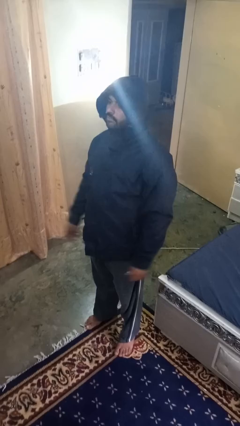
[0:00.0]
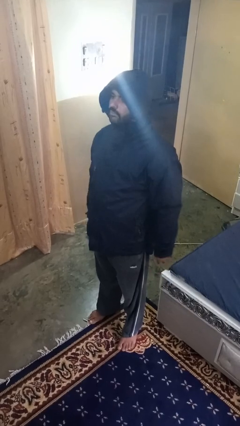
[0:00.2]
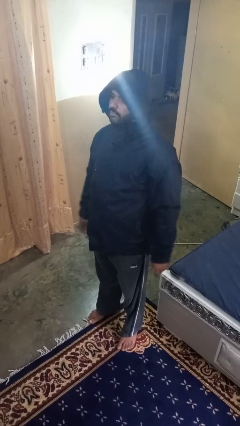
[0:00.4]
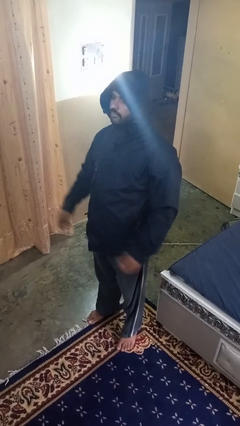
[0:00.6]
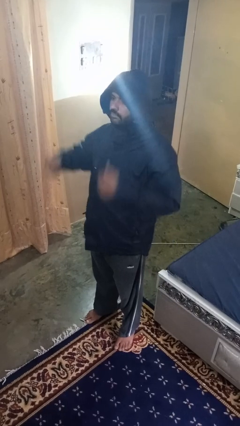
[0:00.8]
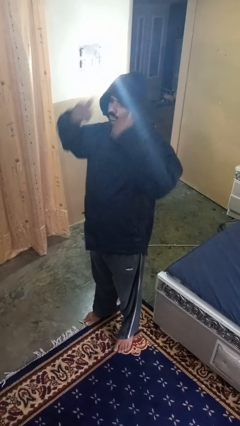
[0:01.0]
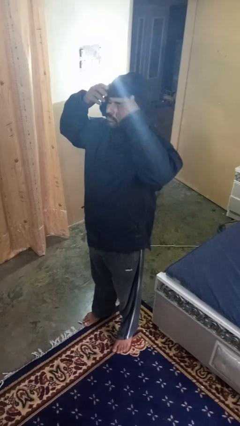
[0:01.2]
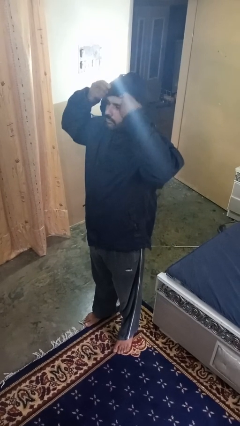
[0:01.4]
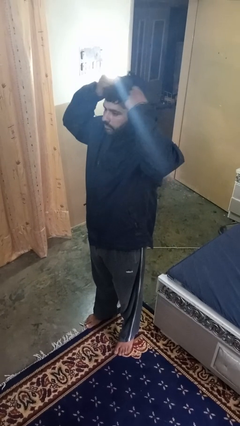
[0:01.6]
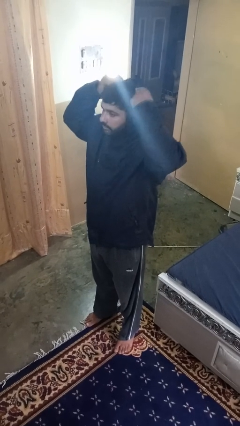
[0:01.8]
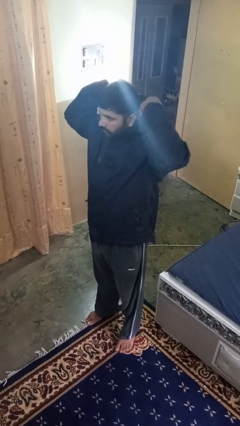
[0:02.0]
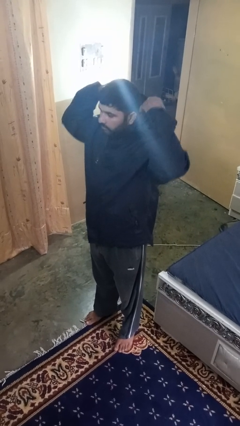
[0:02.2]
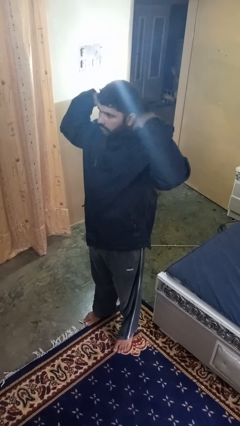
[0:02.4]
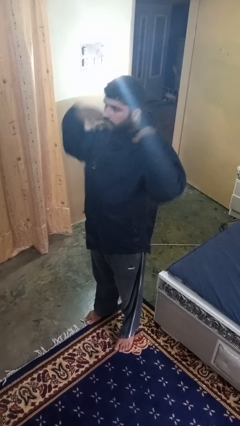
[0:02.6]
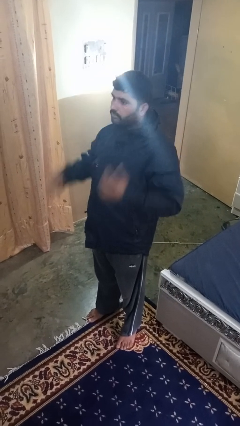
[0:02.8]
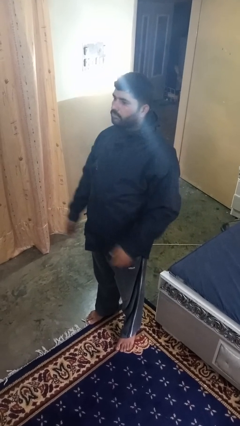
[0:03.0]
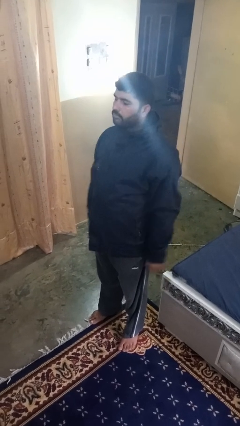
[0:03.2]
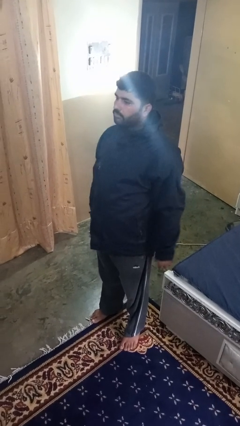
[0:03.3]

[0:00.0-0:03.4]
person takes off hoodie

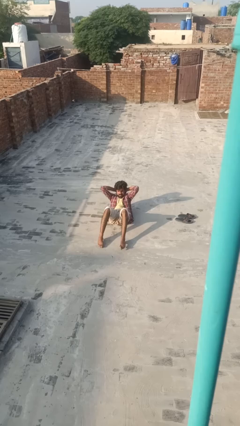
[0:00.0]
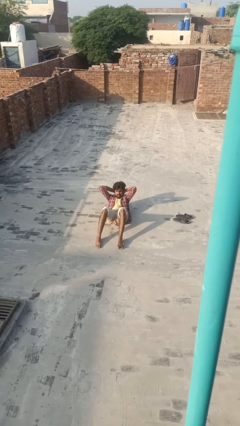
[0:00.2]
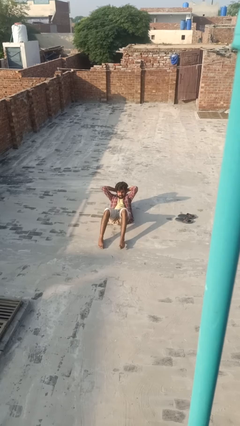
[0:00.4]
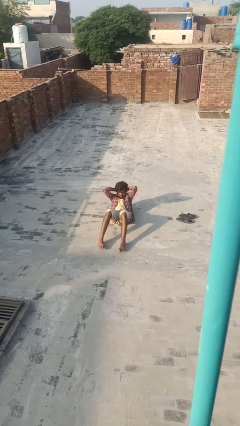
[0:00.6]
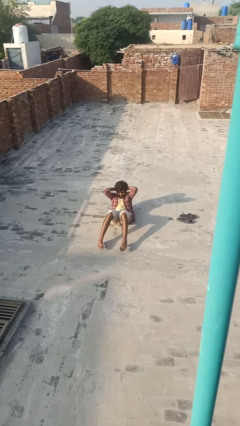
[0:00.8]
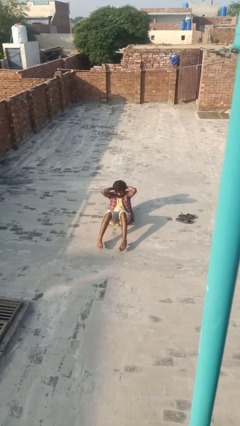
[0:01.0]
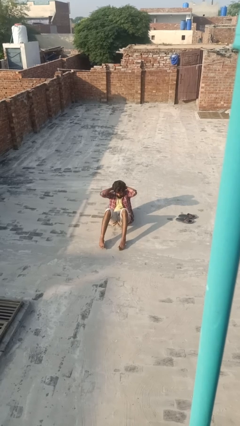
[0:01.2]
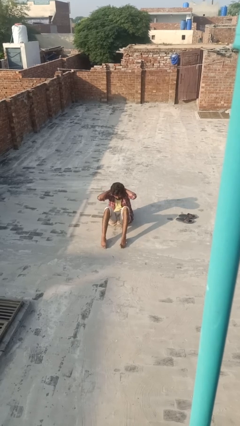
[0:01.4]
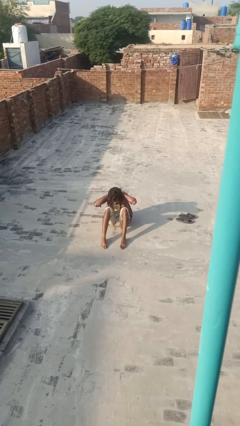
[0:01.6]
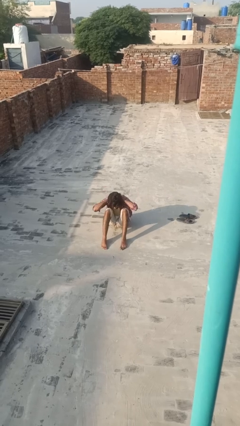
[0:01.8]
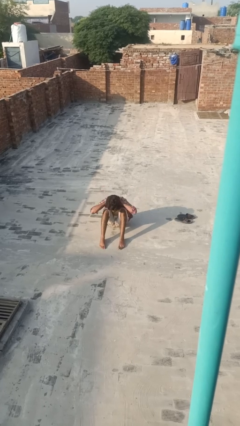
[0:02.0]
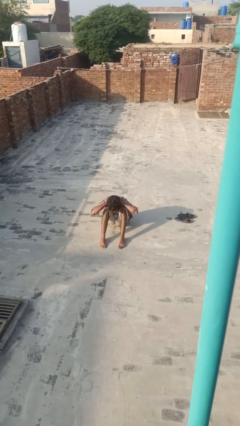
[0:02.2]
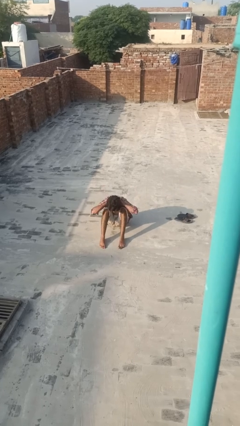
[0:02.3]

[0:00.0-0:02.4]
person exercises with situp

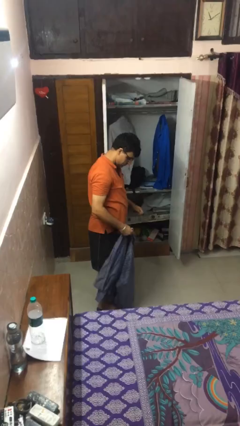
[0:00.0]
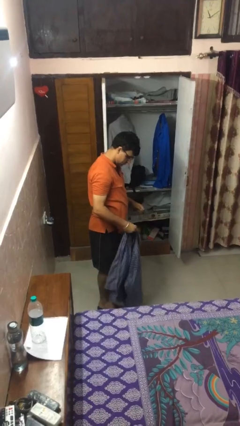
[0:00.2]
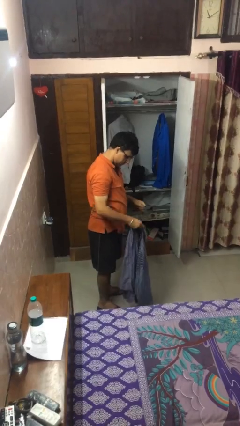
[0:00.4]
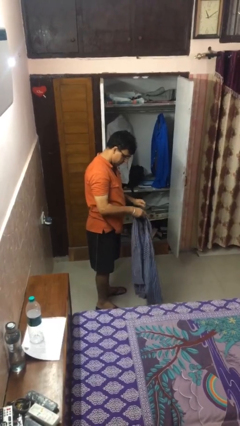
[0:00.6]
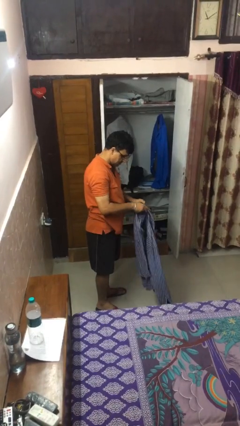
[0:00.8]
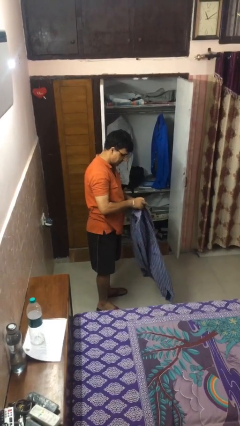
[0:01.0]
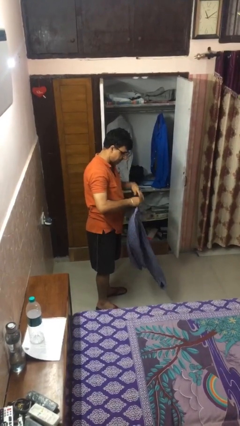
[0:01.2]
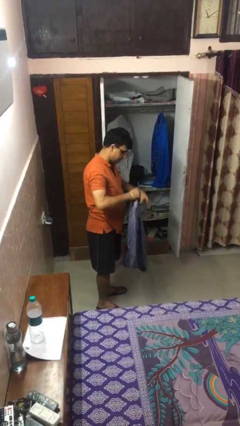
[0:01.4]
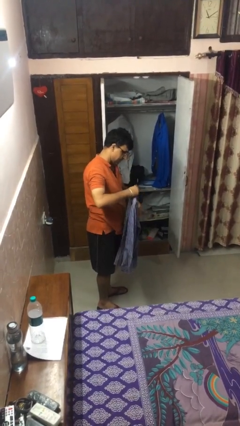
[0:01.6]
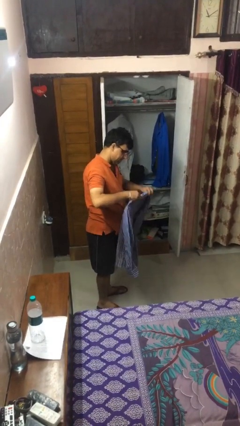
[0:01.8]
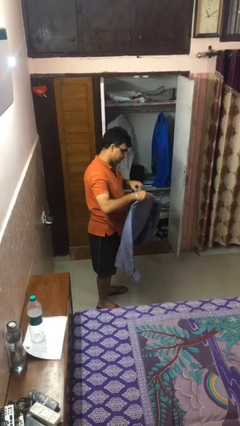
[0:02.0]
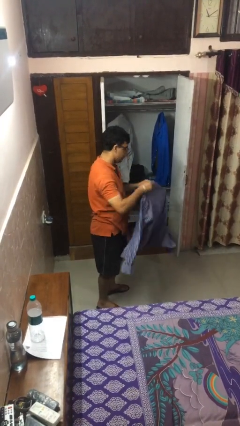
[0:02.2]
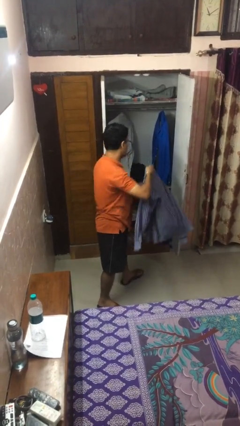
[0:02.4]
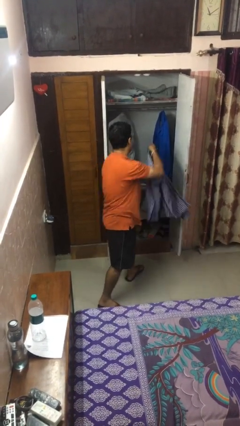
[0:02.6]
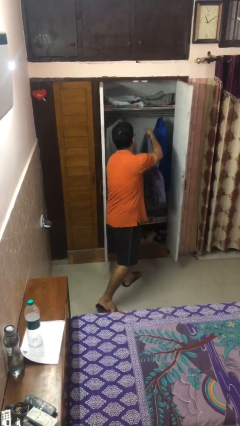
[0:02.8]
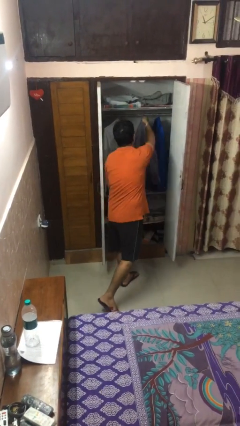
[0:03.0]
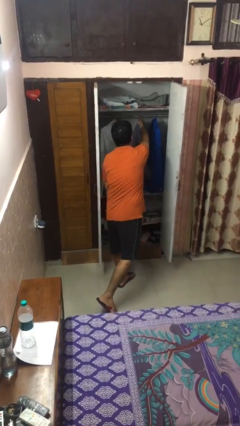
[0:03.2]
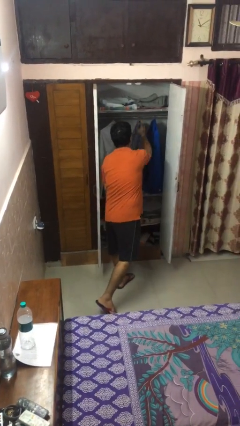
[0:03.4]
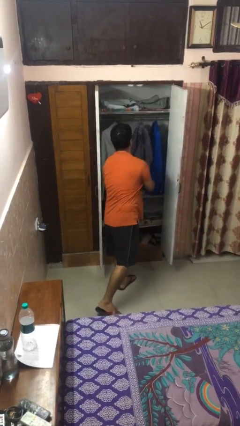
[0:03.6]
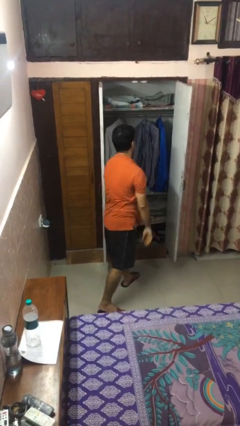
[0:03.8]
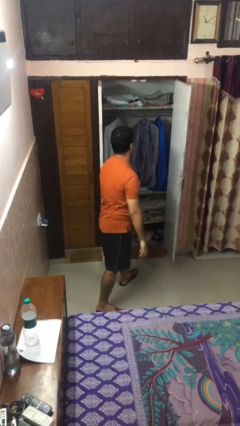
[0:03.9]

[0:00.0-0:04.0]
person puts clothes into closet

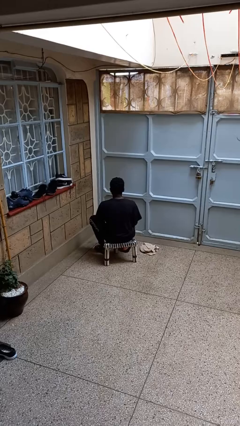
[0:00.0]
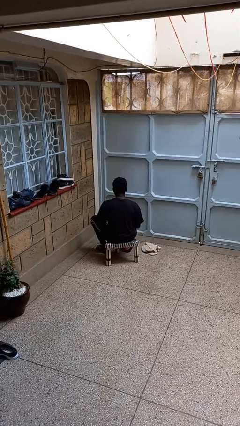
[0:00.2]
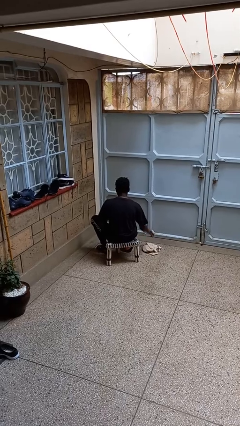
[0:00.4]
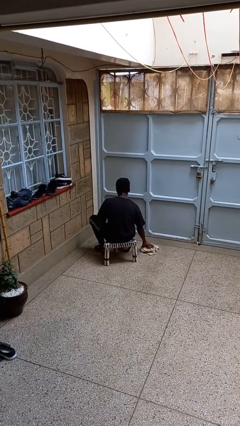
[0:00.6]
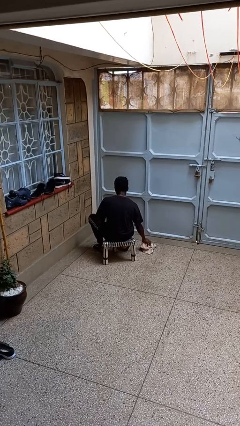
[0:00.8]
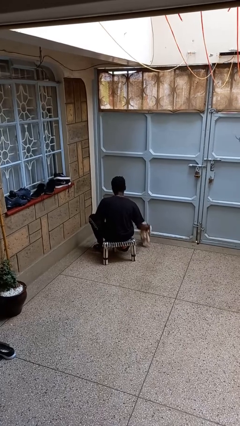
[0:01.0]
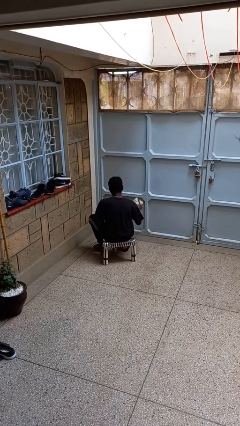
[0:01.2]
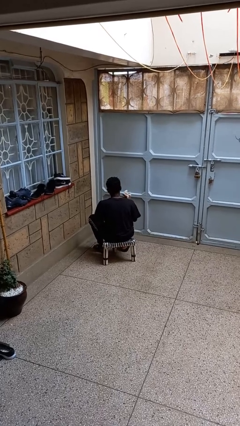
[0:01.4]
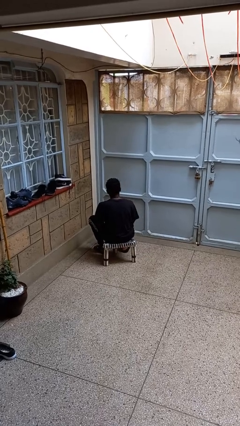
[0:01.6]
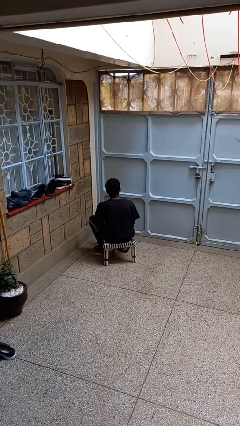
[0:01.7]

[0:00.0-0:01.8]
person picks up object from floor

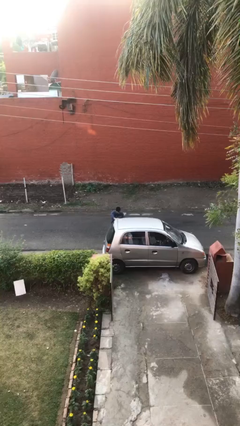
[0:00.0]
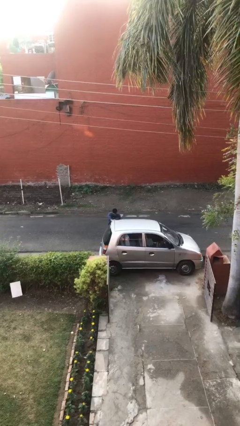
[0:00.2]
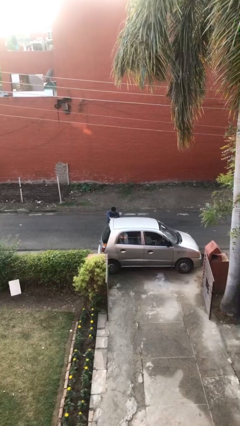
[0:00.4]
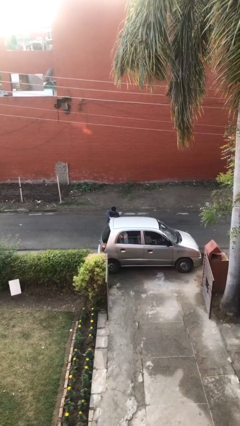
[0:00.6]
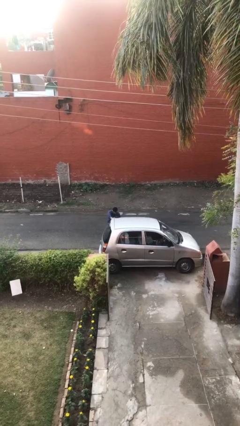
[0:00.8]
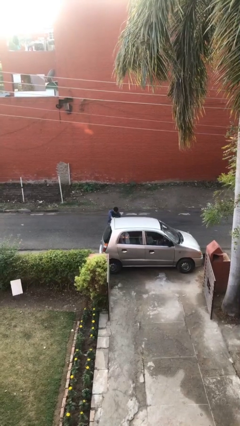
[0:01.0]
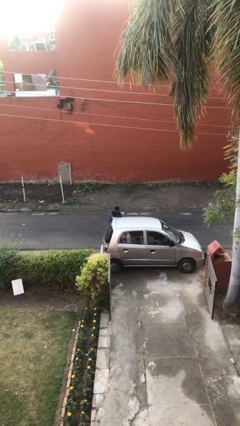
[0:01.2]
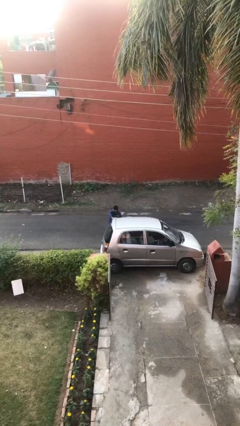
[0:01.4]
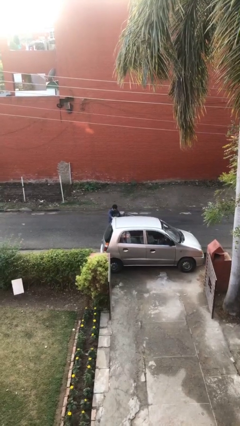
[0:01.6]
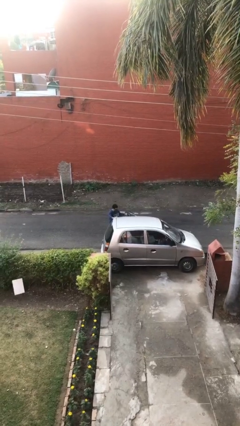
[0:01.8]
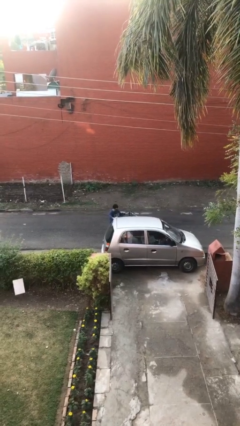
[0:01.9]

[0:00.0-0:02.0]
person opens car door

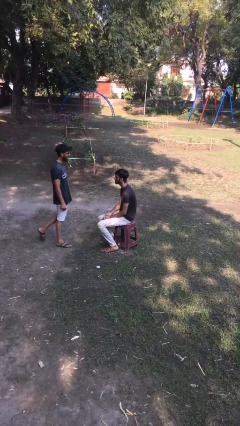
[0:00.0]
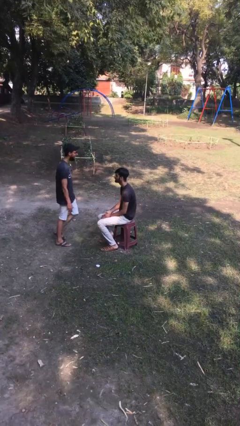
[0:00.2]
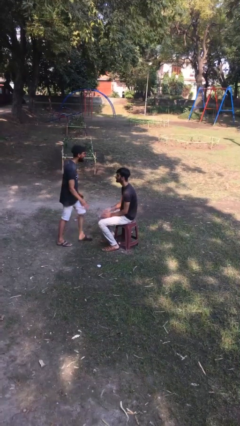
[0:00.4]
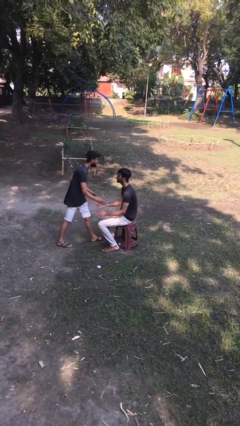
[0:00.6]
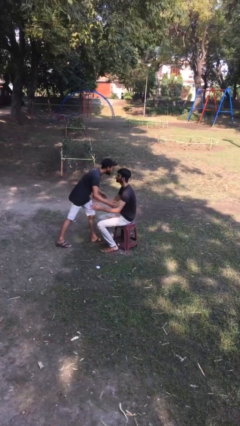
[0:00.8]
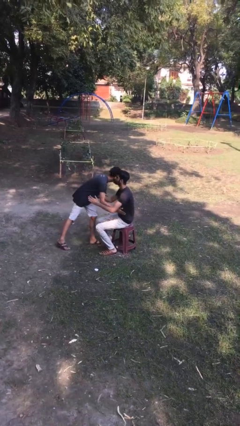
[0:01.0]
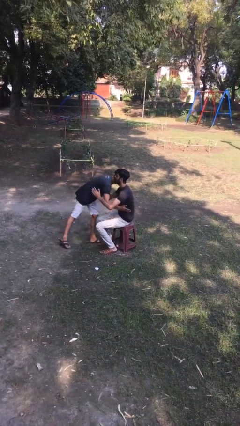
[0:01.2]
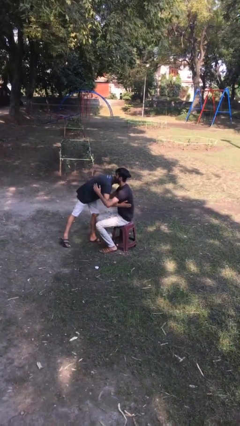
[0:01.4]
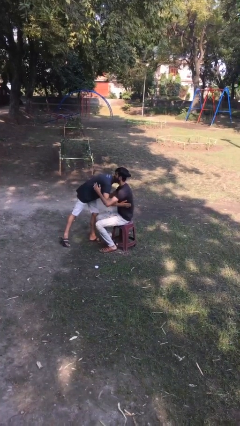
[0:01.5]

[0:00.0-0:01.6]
person embraces person

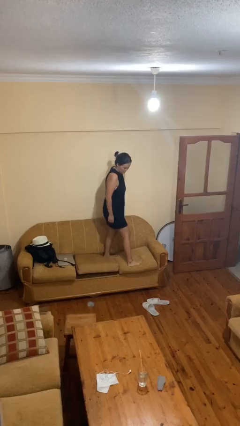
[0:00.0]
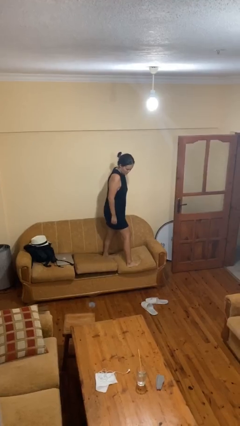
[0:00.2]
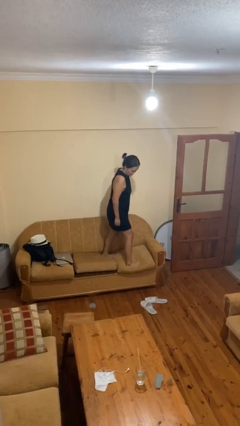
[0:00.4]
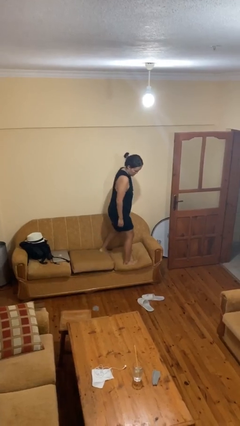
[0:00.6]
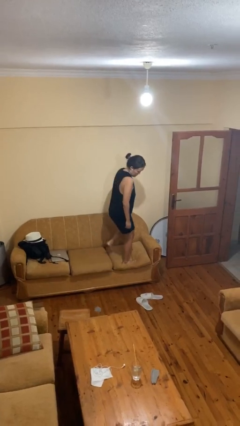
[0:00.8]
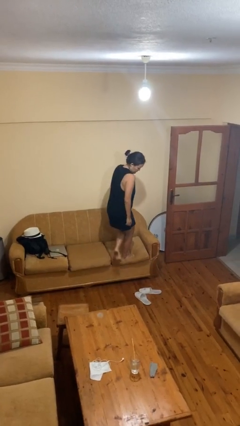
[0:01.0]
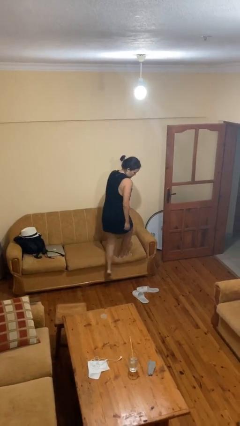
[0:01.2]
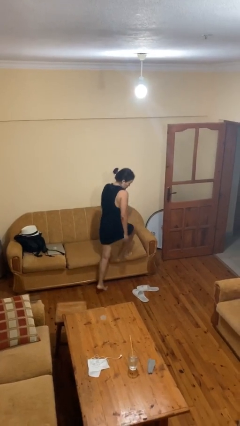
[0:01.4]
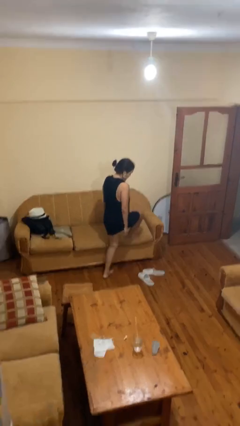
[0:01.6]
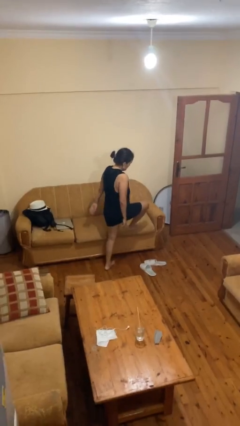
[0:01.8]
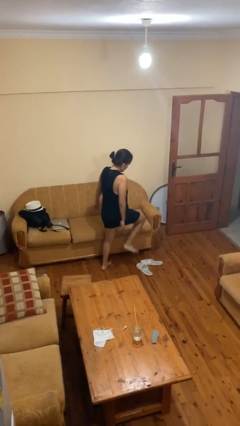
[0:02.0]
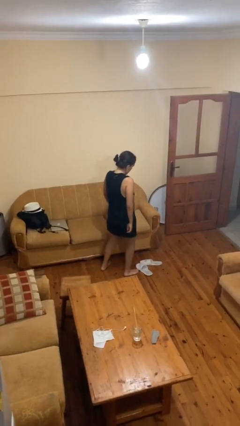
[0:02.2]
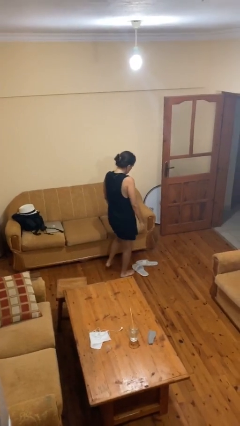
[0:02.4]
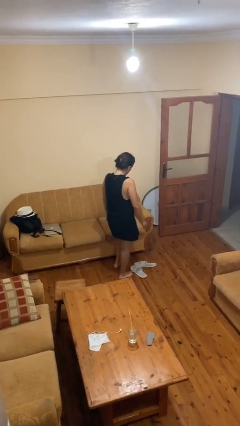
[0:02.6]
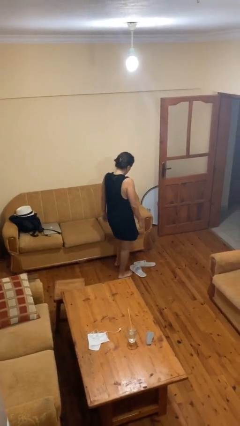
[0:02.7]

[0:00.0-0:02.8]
person climbs off couch
